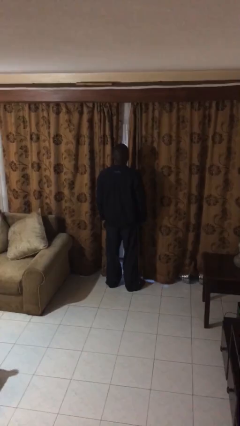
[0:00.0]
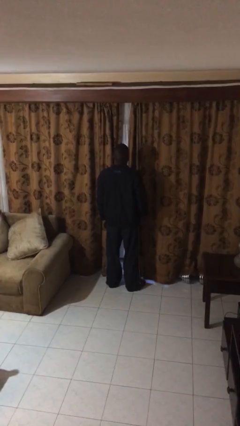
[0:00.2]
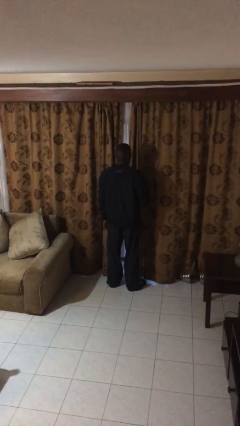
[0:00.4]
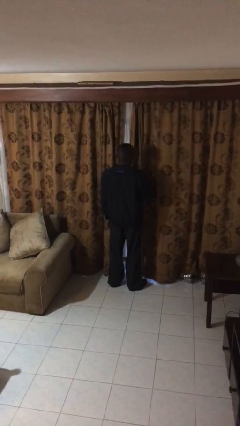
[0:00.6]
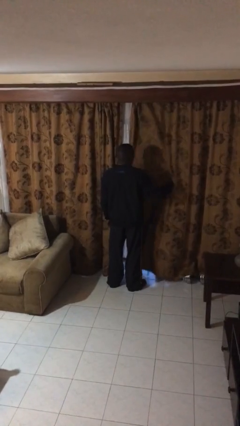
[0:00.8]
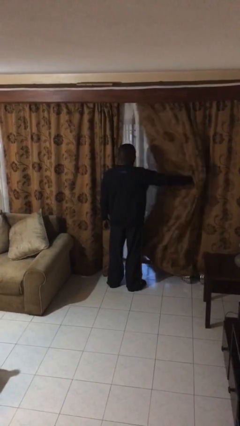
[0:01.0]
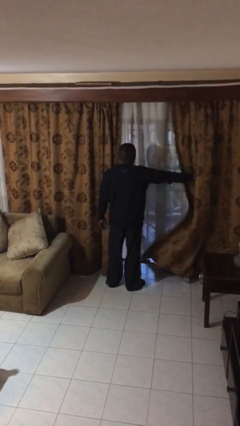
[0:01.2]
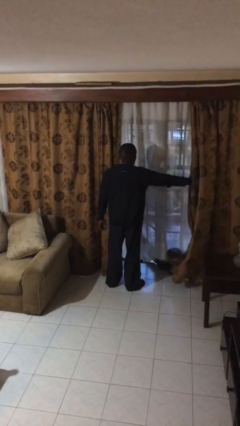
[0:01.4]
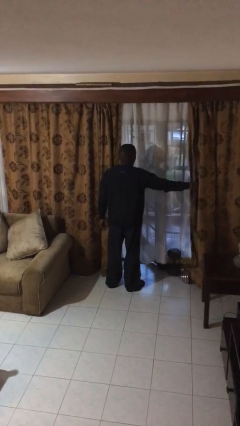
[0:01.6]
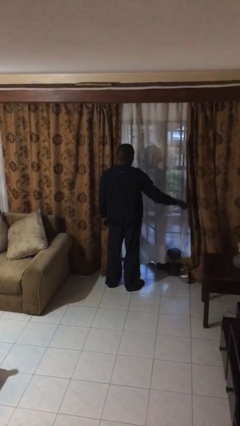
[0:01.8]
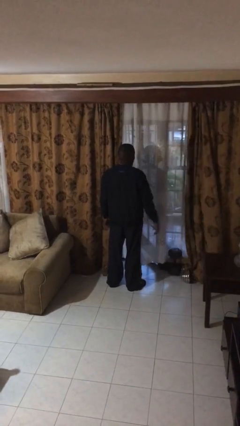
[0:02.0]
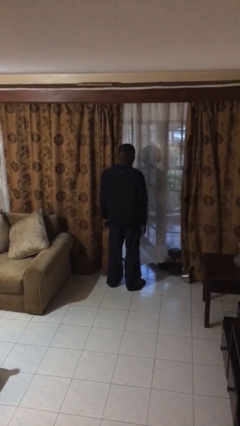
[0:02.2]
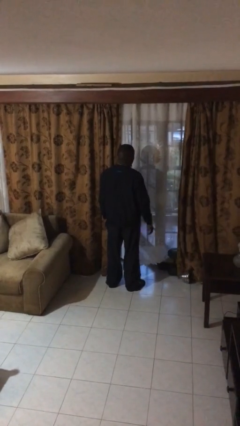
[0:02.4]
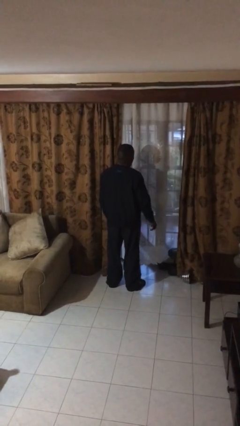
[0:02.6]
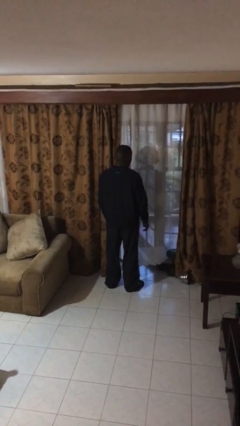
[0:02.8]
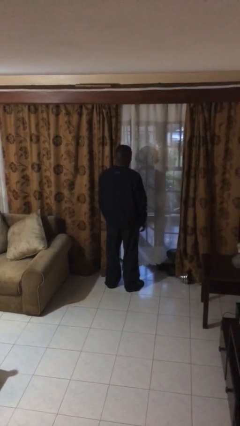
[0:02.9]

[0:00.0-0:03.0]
person opens curtains

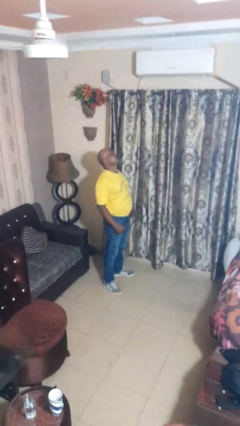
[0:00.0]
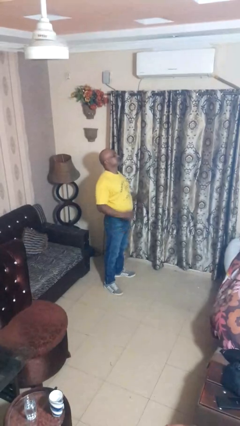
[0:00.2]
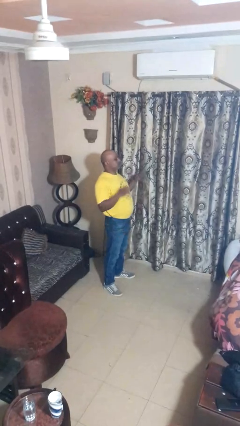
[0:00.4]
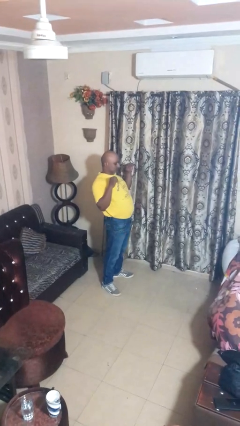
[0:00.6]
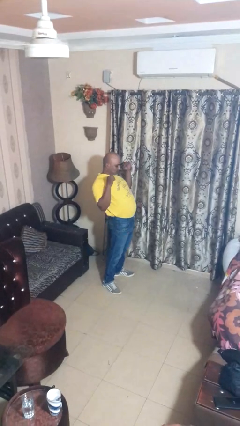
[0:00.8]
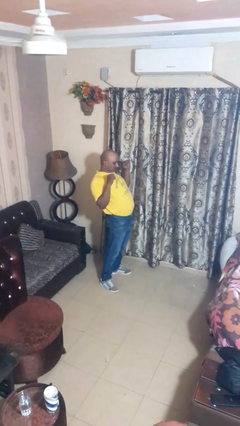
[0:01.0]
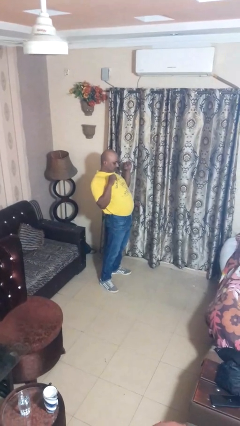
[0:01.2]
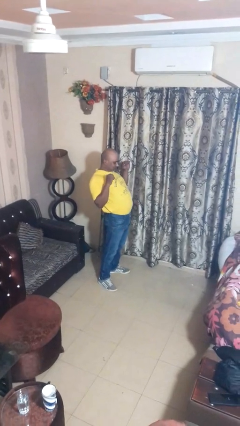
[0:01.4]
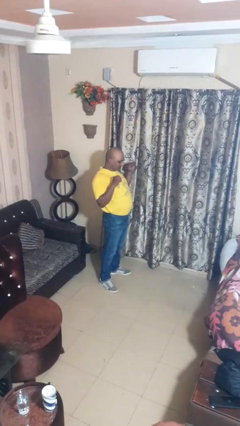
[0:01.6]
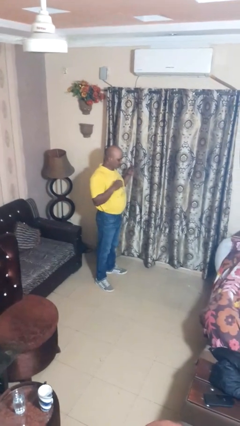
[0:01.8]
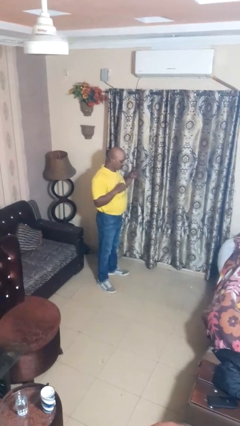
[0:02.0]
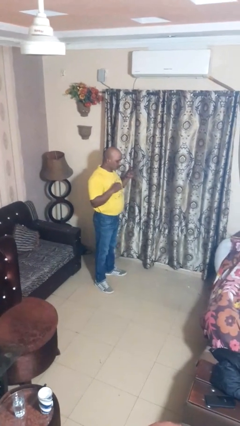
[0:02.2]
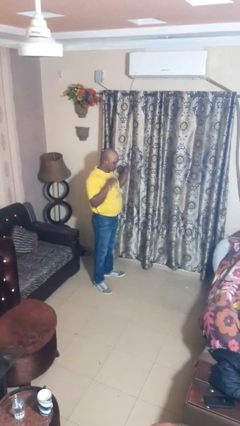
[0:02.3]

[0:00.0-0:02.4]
person stretches arms to side

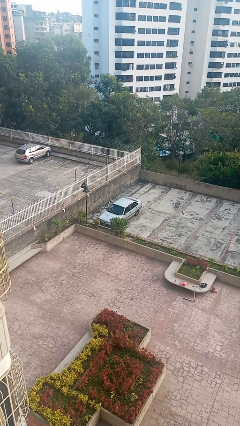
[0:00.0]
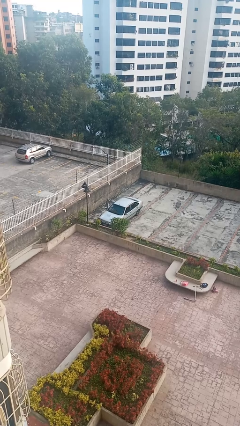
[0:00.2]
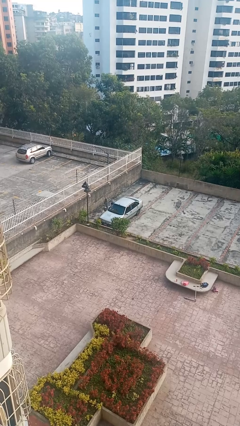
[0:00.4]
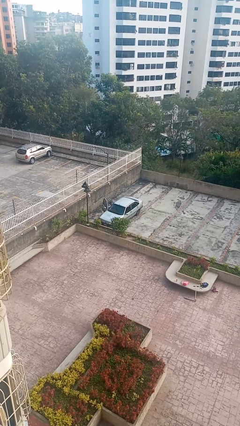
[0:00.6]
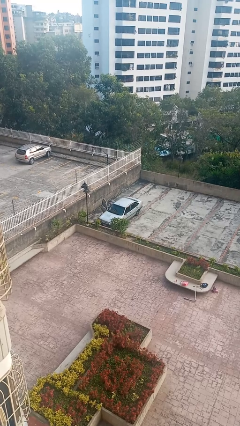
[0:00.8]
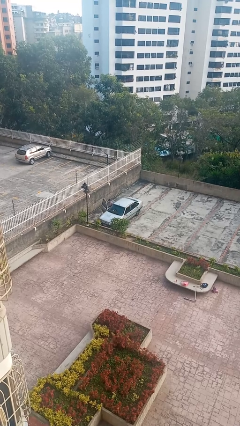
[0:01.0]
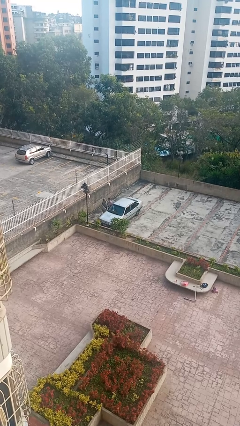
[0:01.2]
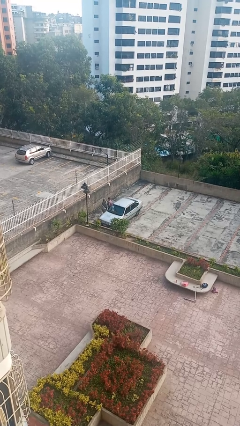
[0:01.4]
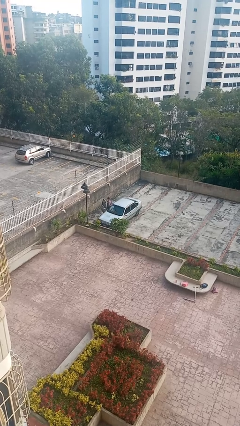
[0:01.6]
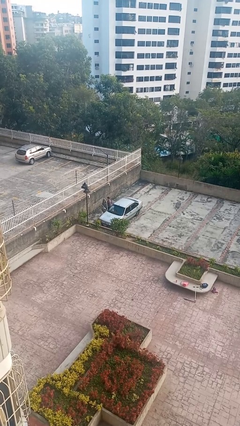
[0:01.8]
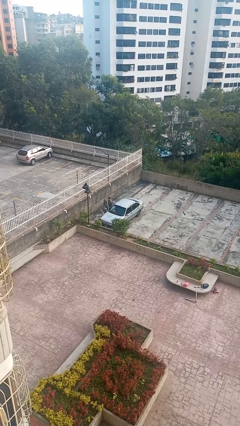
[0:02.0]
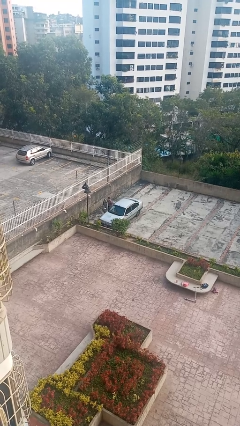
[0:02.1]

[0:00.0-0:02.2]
car drops off person

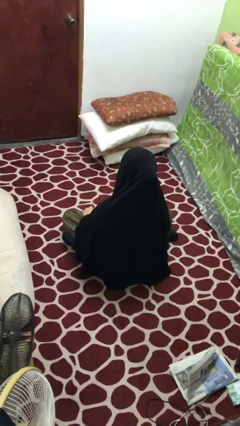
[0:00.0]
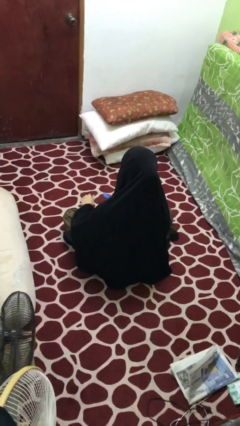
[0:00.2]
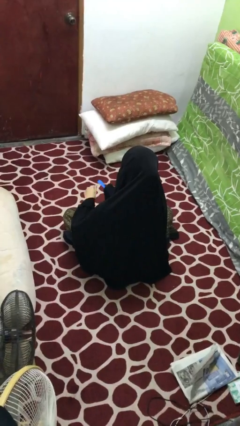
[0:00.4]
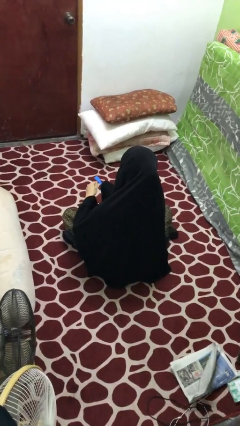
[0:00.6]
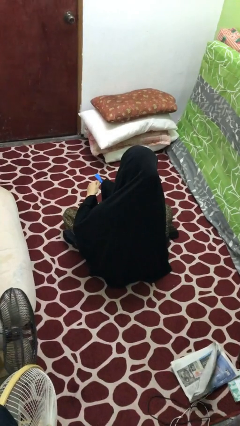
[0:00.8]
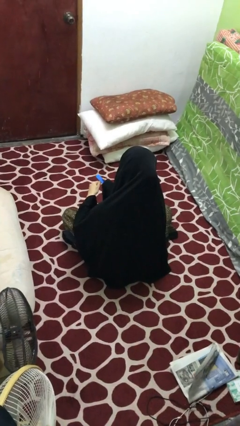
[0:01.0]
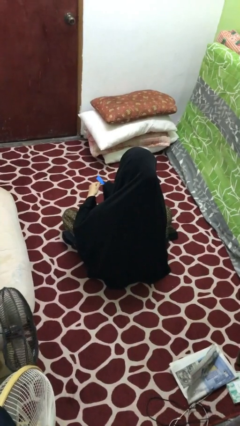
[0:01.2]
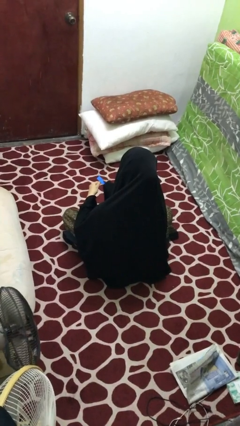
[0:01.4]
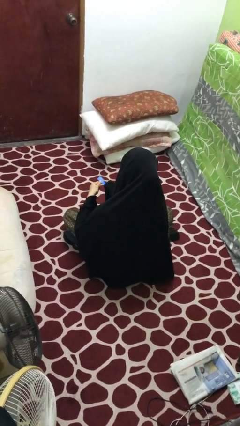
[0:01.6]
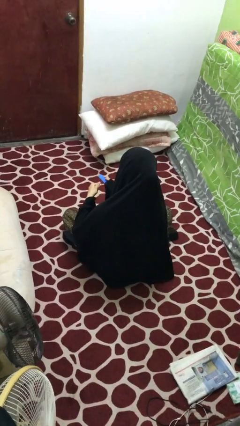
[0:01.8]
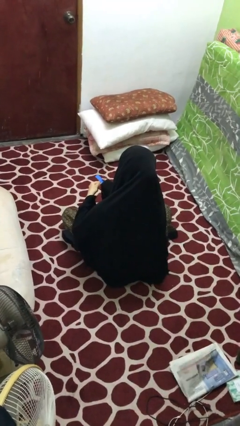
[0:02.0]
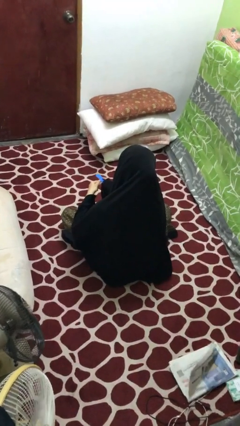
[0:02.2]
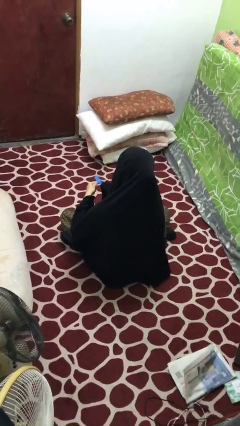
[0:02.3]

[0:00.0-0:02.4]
person files fingernails

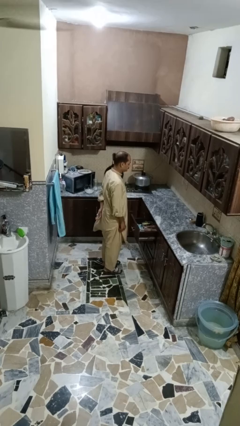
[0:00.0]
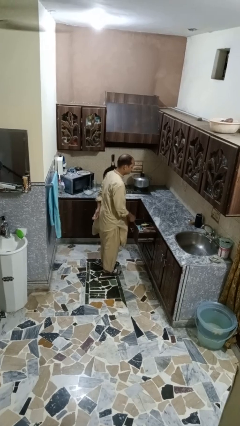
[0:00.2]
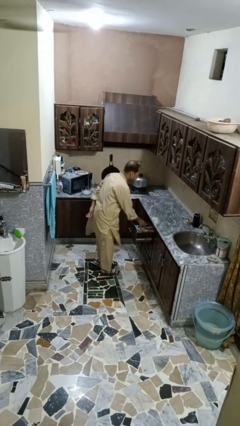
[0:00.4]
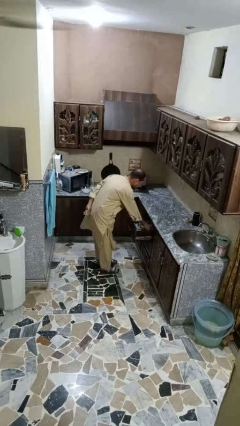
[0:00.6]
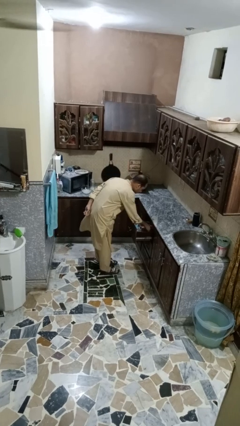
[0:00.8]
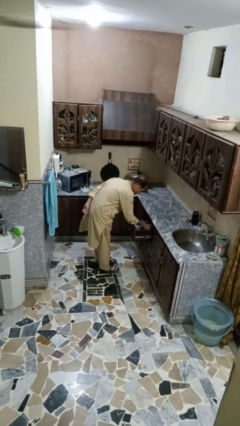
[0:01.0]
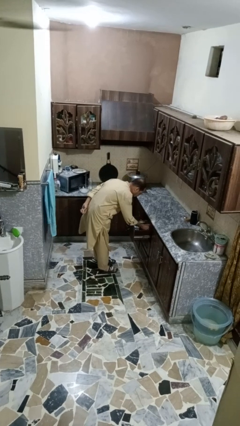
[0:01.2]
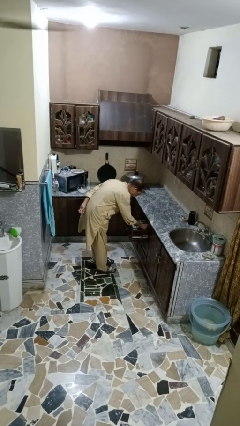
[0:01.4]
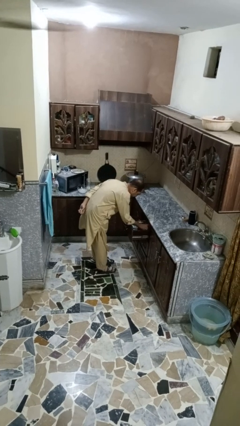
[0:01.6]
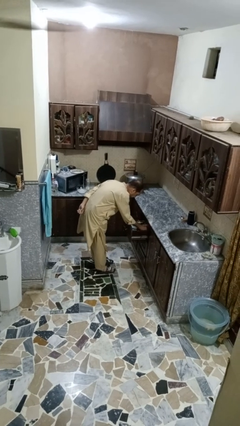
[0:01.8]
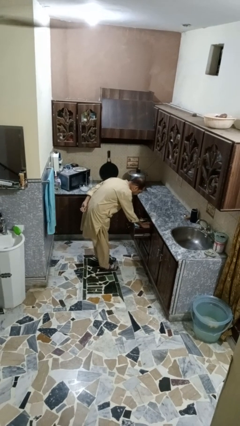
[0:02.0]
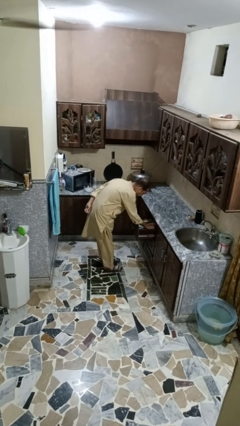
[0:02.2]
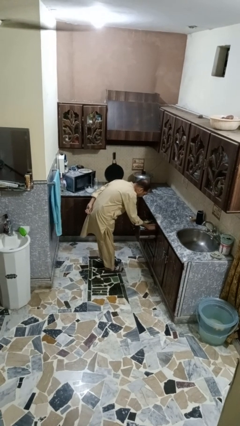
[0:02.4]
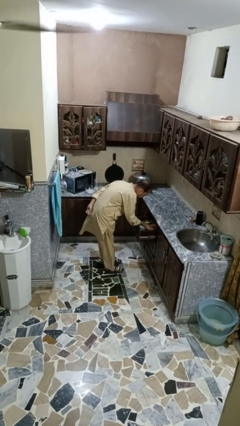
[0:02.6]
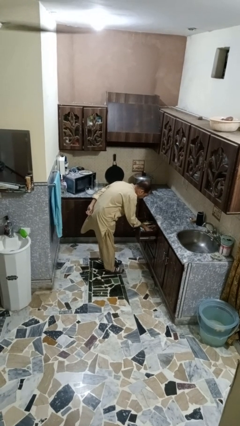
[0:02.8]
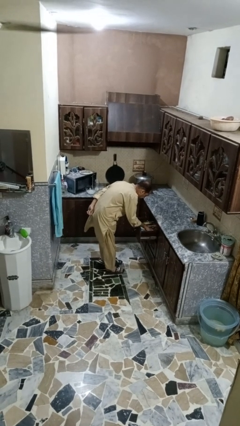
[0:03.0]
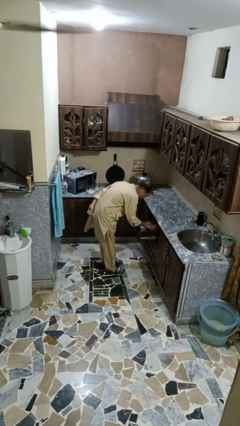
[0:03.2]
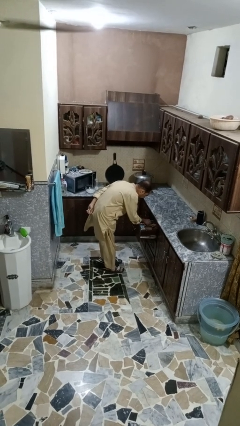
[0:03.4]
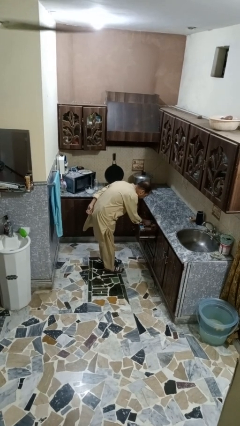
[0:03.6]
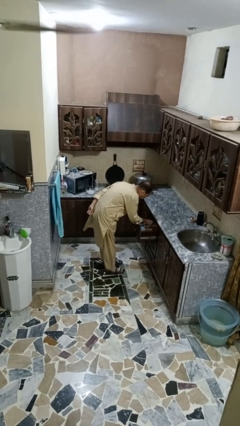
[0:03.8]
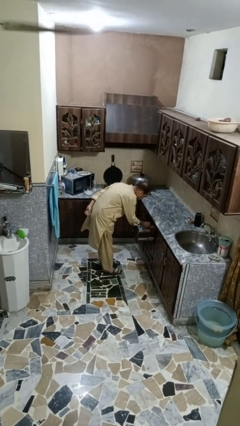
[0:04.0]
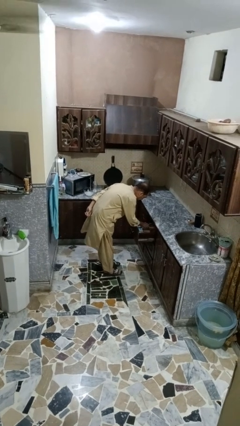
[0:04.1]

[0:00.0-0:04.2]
person searches in kitchen drawer

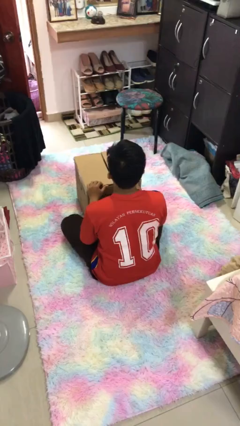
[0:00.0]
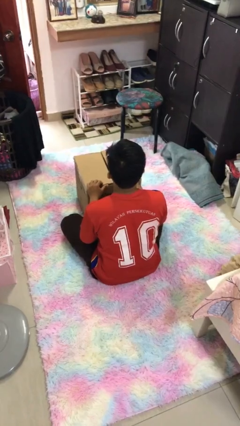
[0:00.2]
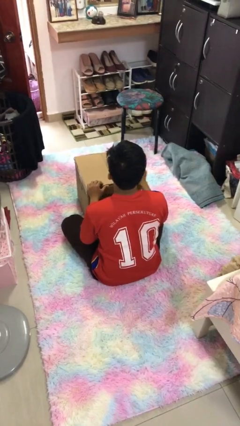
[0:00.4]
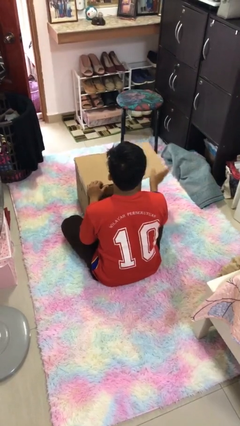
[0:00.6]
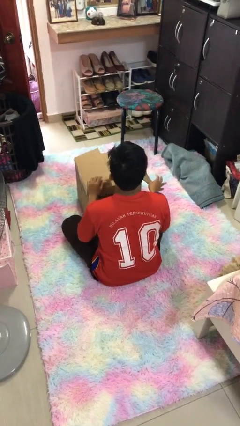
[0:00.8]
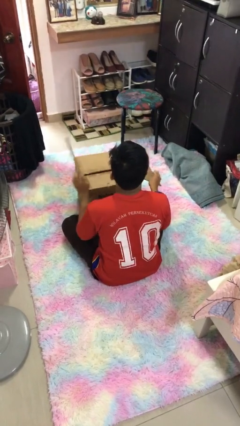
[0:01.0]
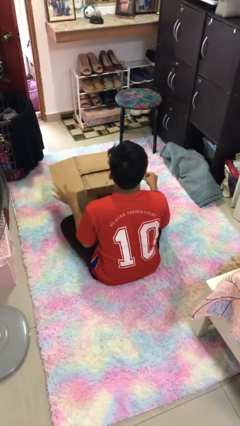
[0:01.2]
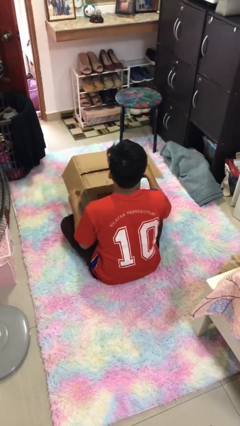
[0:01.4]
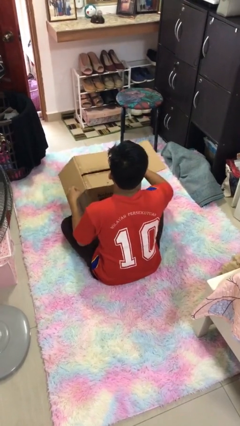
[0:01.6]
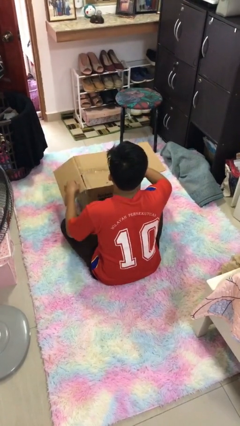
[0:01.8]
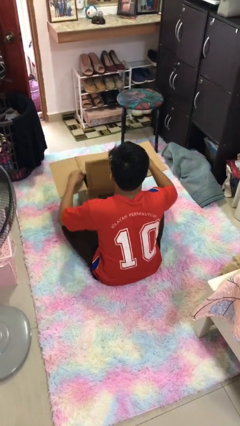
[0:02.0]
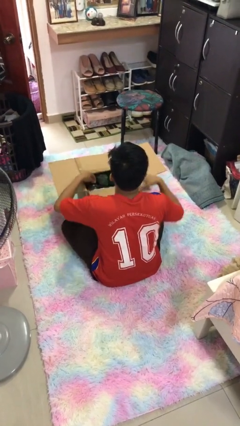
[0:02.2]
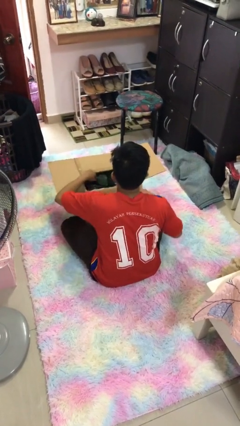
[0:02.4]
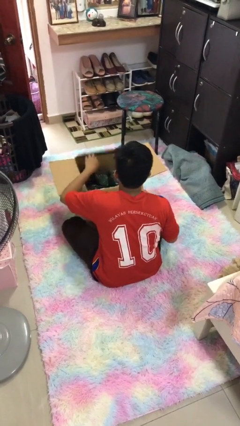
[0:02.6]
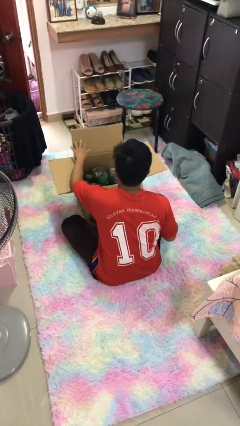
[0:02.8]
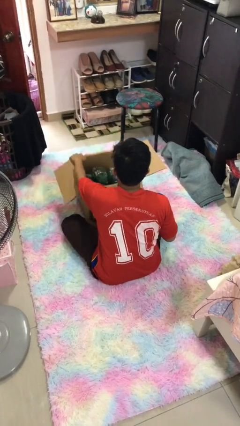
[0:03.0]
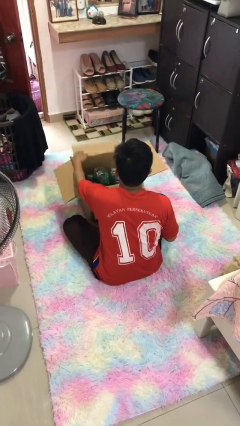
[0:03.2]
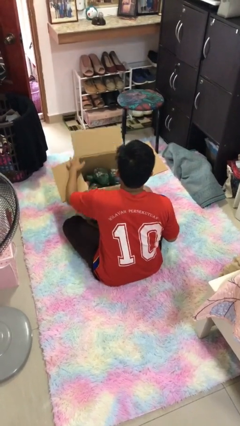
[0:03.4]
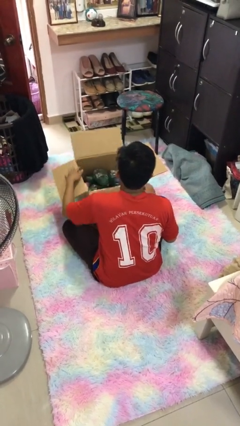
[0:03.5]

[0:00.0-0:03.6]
person opens box
